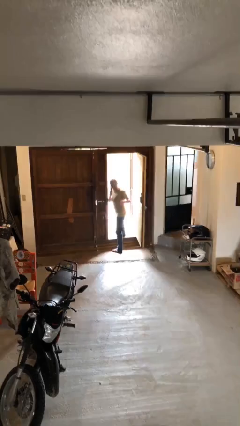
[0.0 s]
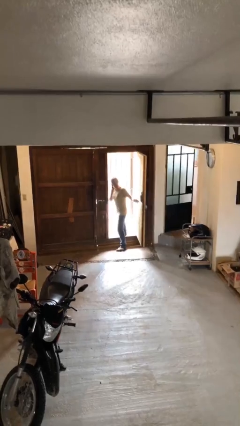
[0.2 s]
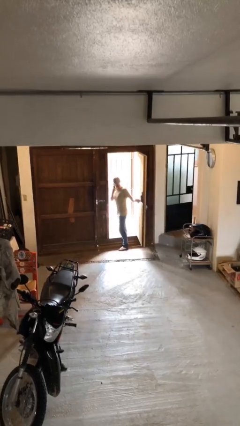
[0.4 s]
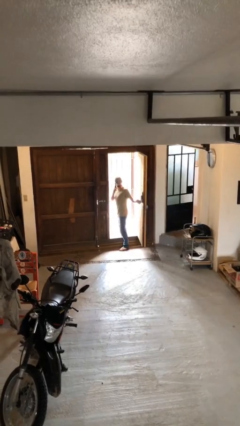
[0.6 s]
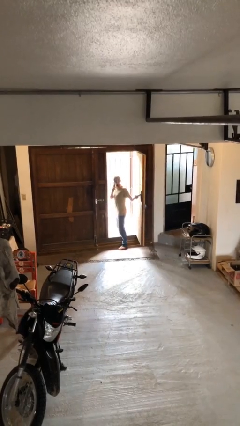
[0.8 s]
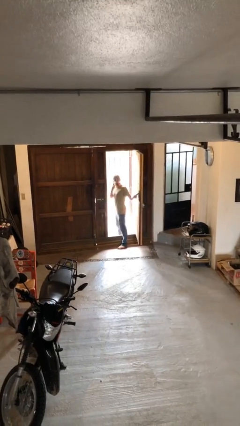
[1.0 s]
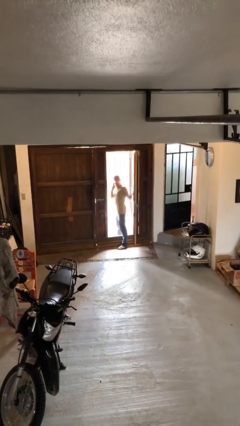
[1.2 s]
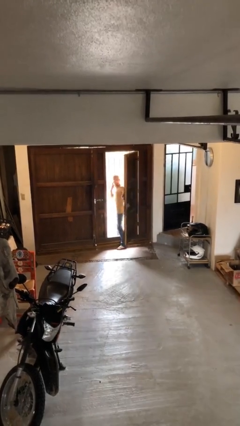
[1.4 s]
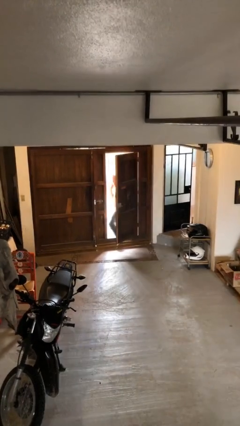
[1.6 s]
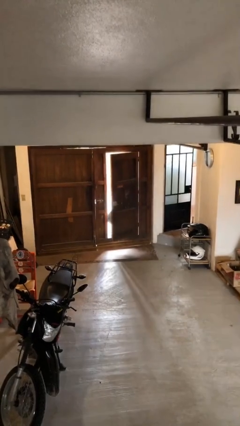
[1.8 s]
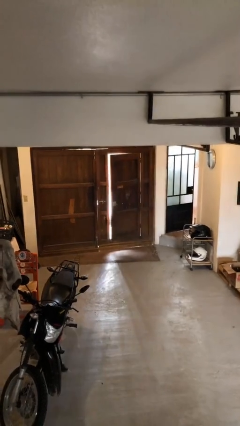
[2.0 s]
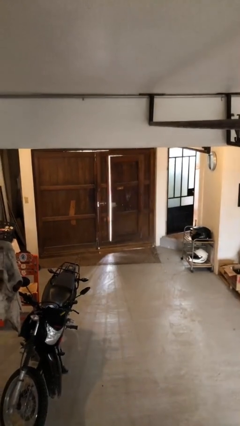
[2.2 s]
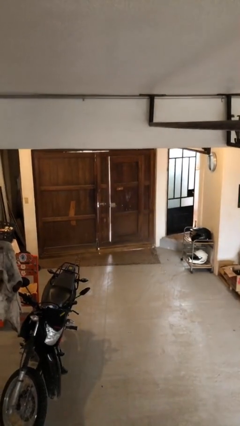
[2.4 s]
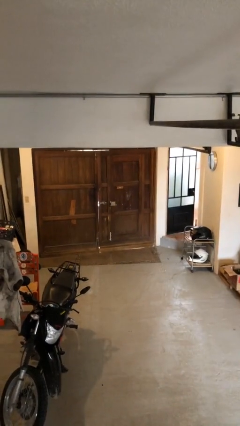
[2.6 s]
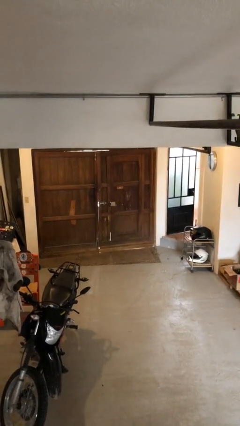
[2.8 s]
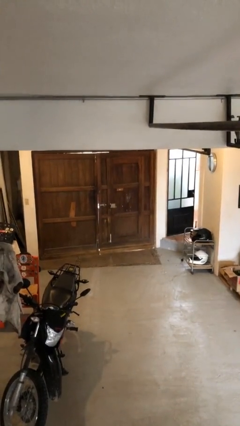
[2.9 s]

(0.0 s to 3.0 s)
person closes facility door

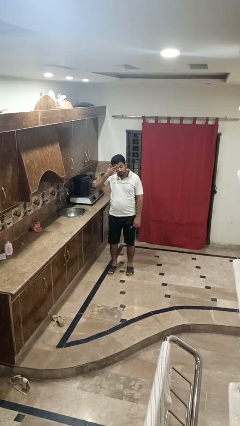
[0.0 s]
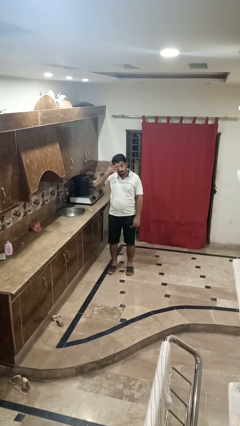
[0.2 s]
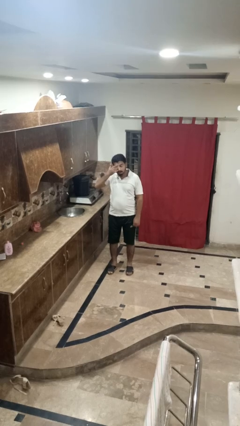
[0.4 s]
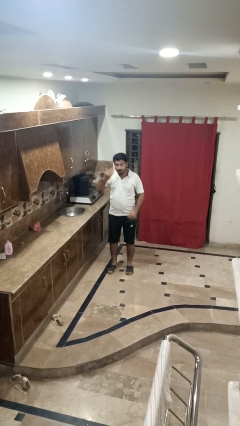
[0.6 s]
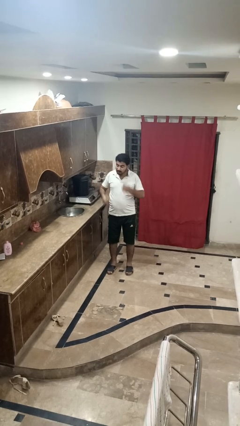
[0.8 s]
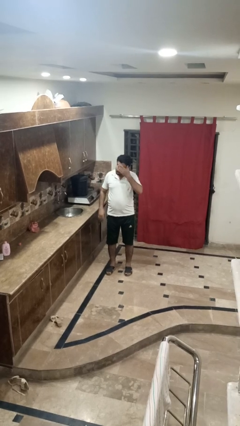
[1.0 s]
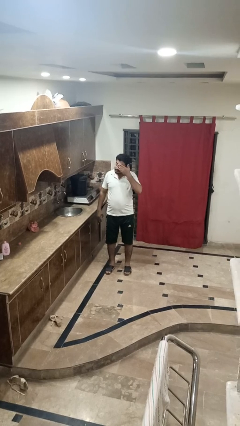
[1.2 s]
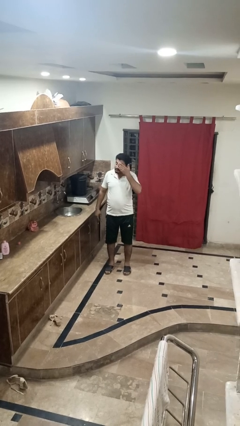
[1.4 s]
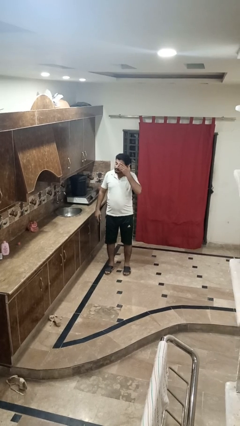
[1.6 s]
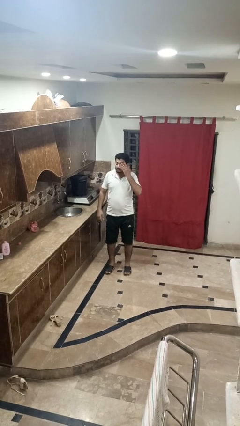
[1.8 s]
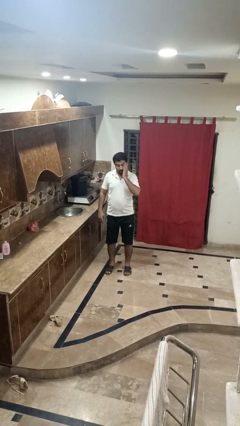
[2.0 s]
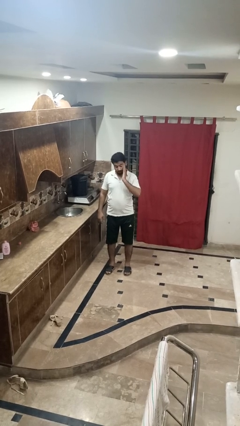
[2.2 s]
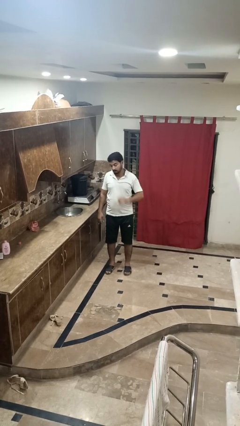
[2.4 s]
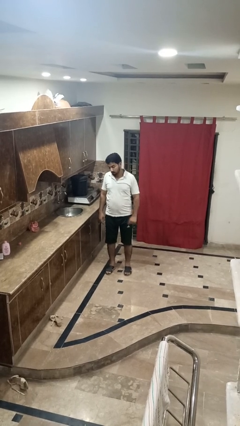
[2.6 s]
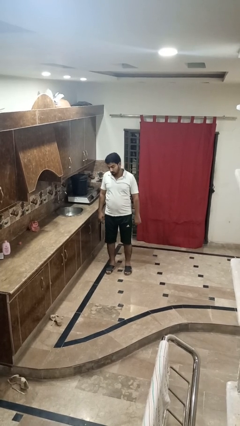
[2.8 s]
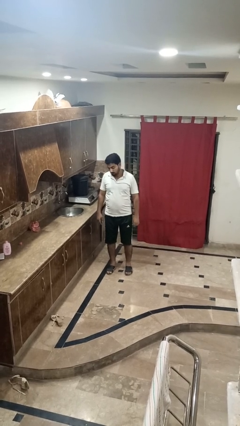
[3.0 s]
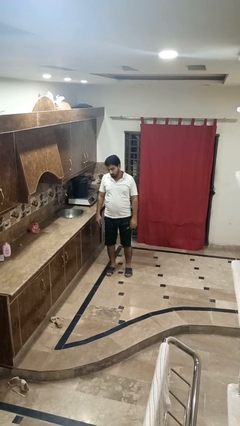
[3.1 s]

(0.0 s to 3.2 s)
person rubs eyes

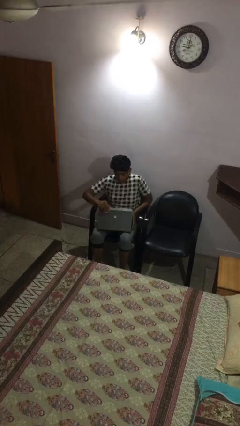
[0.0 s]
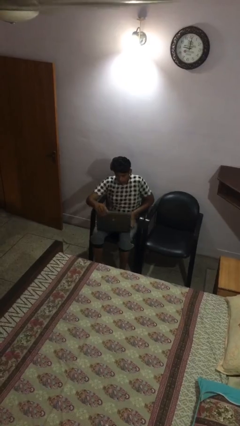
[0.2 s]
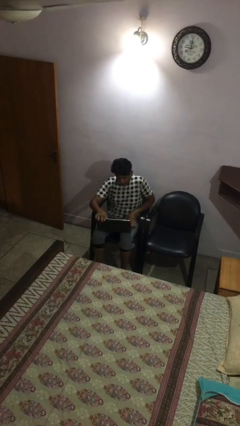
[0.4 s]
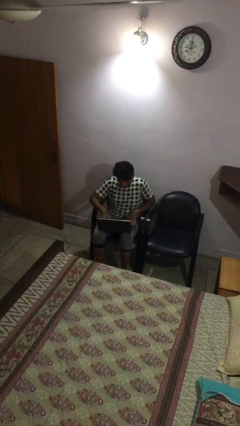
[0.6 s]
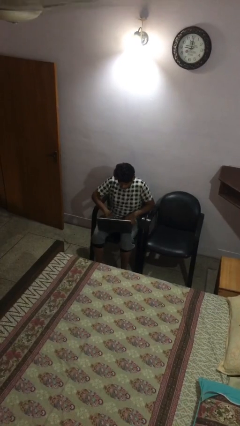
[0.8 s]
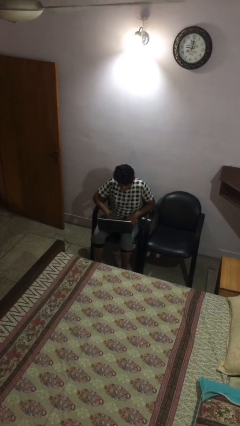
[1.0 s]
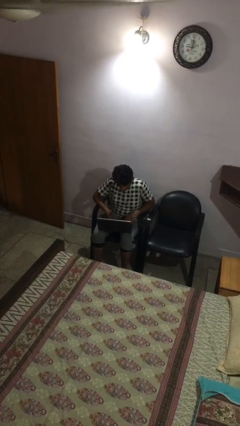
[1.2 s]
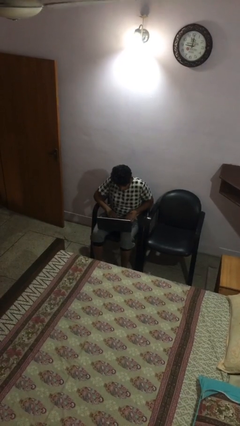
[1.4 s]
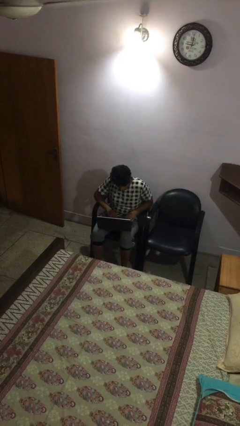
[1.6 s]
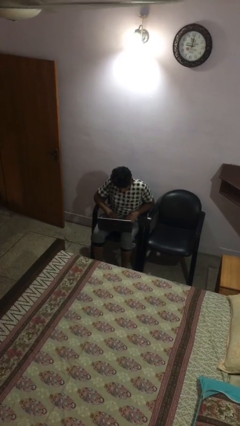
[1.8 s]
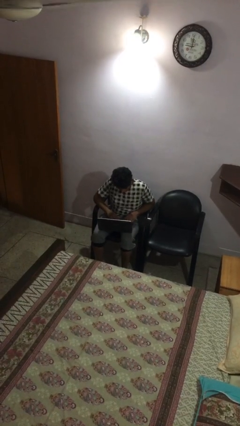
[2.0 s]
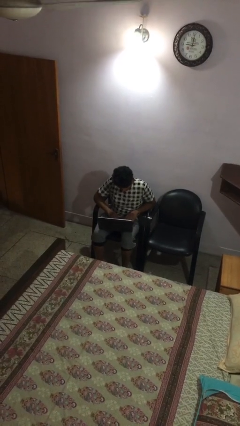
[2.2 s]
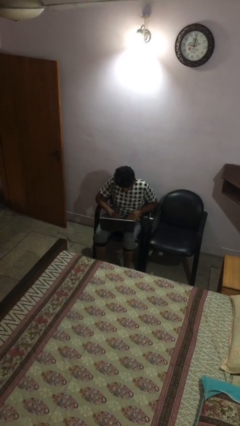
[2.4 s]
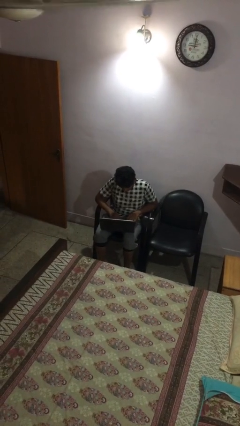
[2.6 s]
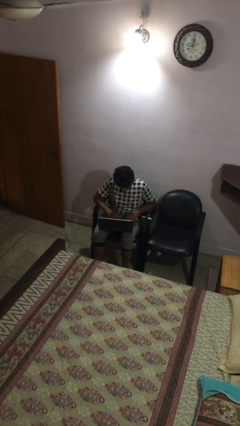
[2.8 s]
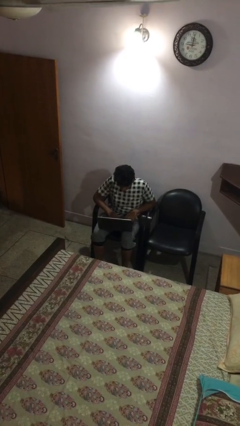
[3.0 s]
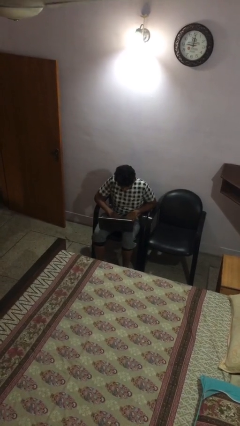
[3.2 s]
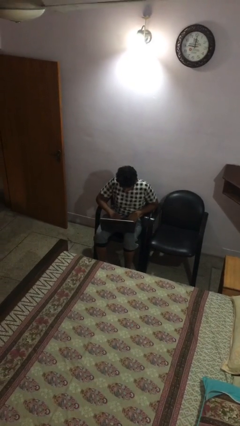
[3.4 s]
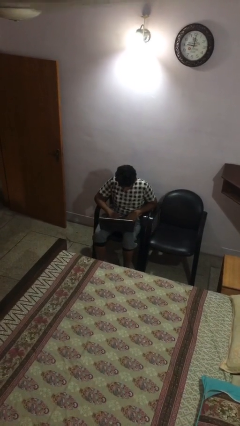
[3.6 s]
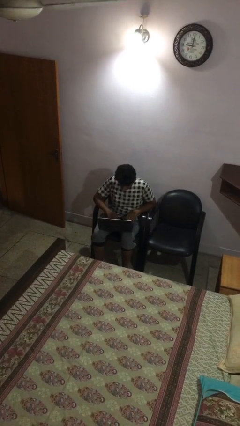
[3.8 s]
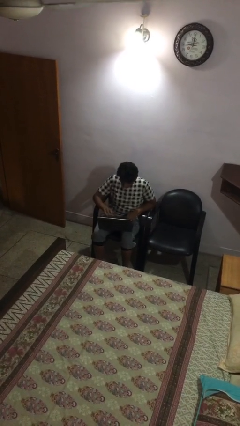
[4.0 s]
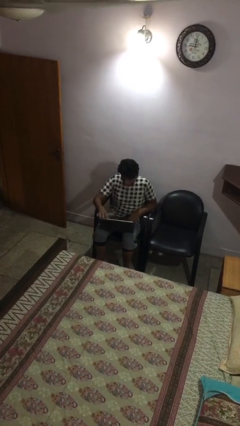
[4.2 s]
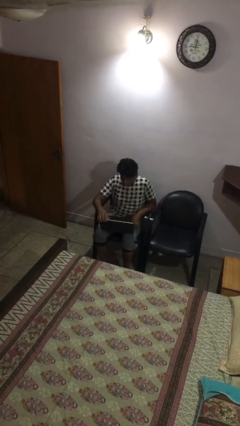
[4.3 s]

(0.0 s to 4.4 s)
person interacts with laptop

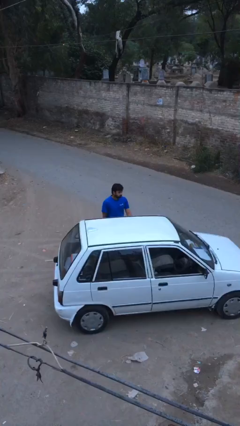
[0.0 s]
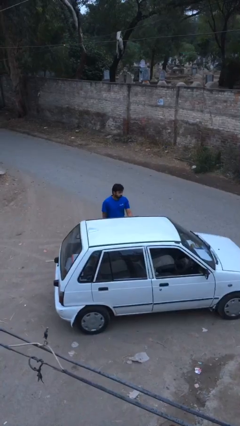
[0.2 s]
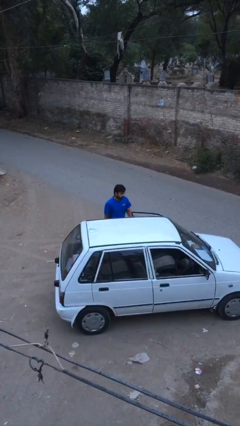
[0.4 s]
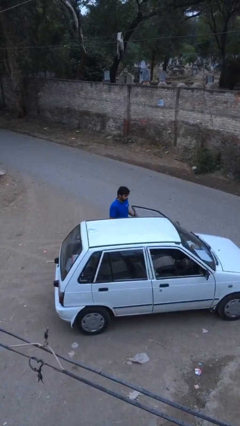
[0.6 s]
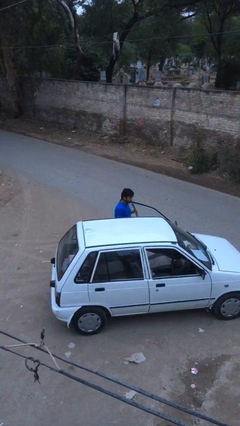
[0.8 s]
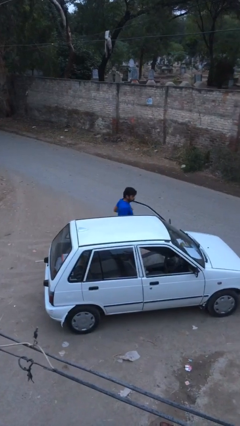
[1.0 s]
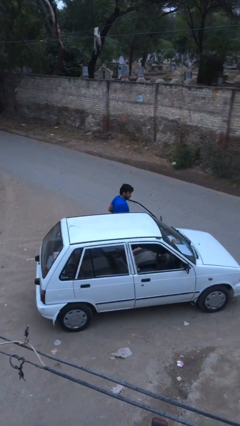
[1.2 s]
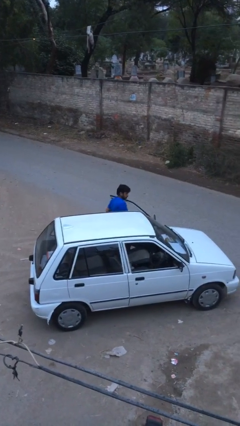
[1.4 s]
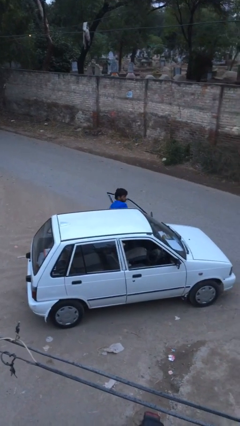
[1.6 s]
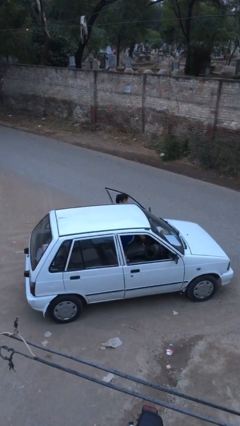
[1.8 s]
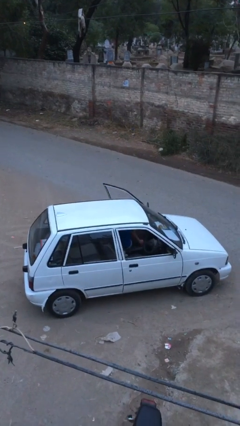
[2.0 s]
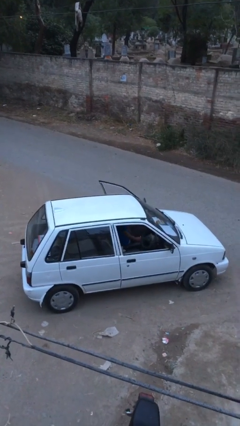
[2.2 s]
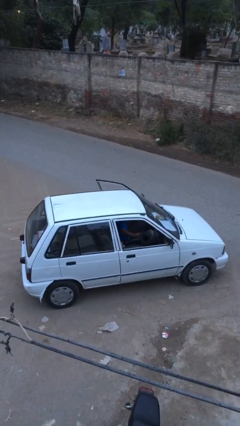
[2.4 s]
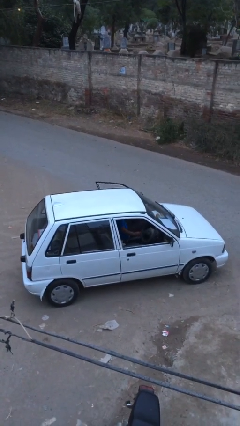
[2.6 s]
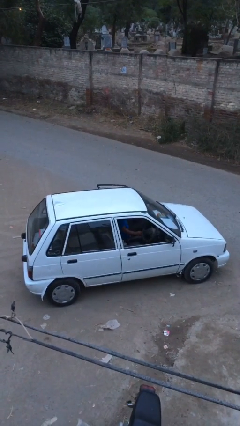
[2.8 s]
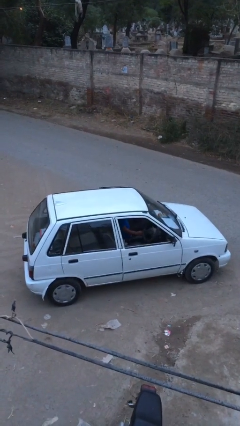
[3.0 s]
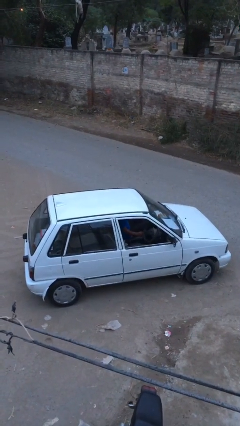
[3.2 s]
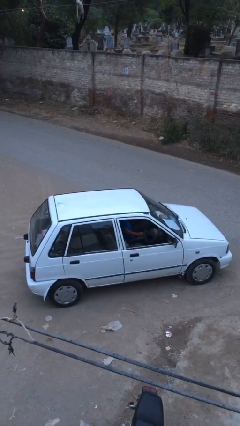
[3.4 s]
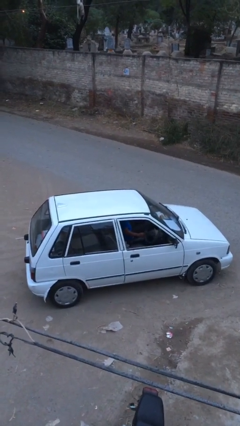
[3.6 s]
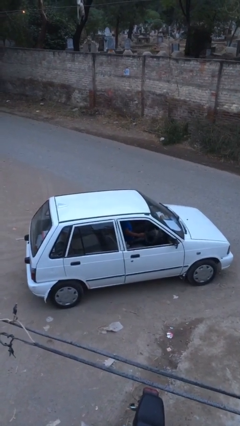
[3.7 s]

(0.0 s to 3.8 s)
person enters car

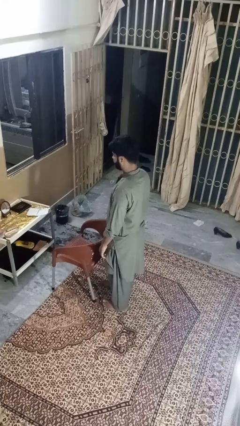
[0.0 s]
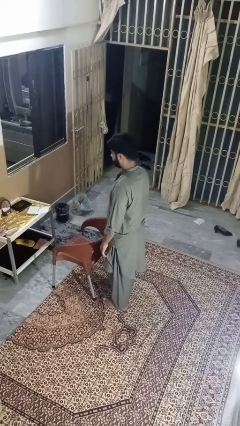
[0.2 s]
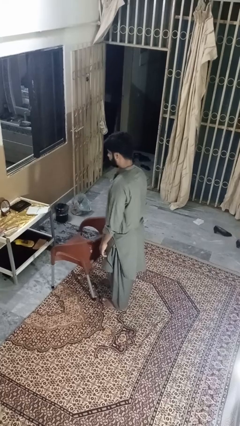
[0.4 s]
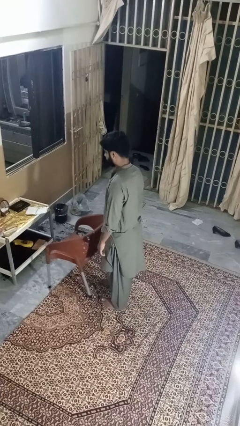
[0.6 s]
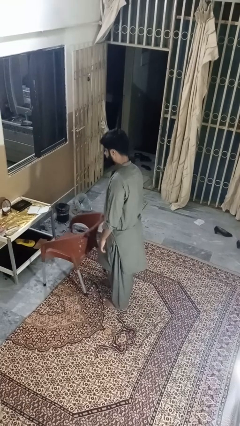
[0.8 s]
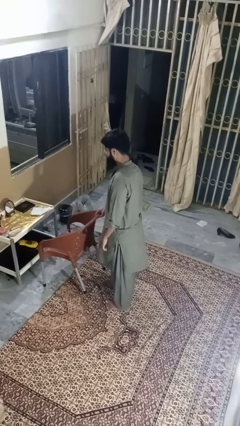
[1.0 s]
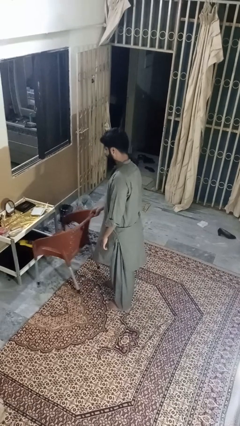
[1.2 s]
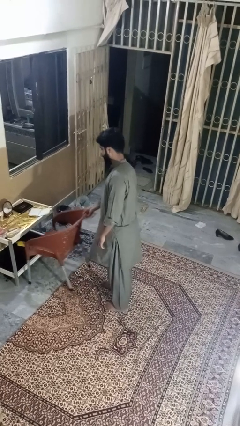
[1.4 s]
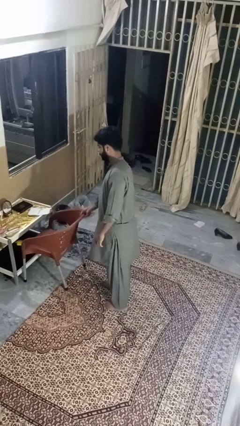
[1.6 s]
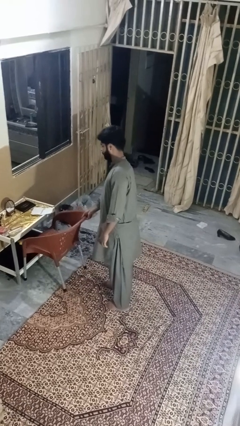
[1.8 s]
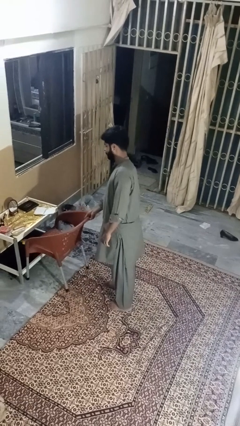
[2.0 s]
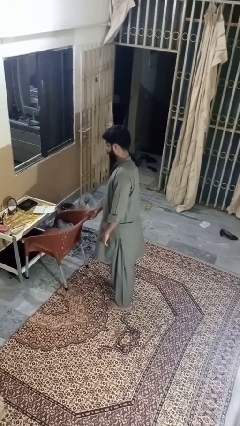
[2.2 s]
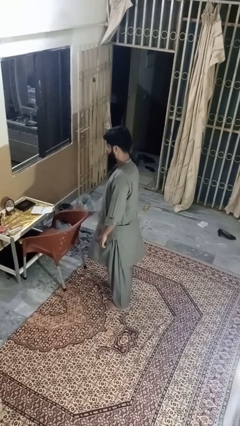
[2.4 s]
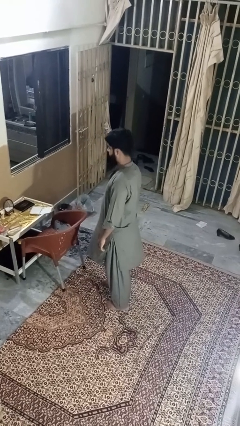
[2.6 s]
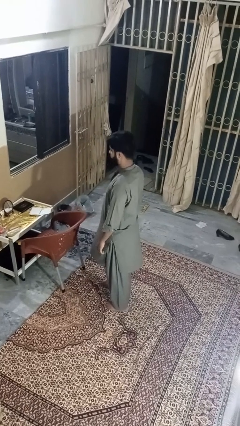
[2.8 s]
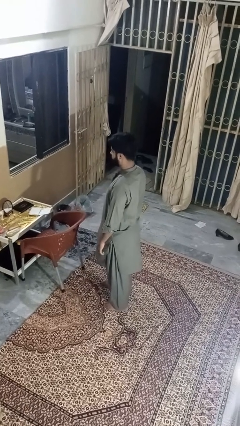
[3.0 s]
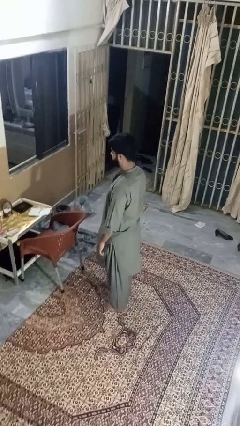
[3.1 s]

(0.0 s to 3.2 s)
person pushes in chair
